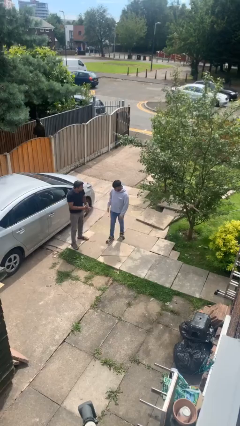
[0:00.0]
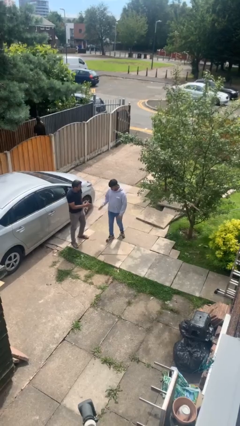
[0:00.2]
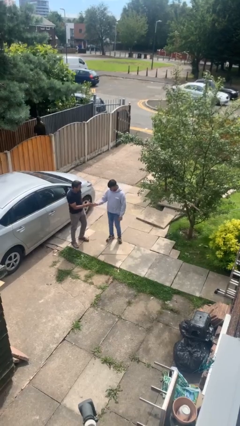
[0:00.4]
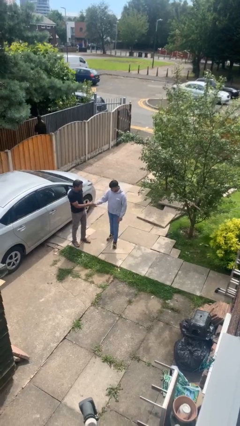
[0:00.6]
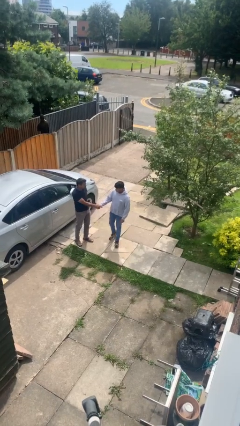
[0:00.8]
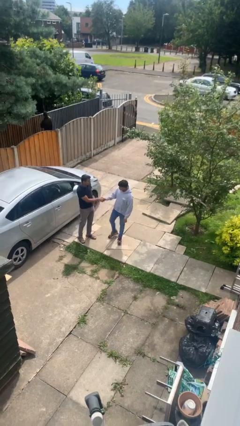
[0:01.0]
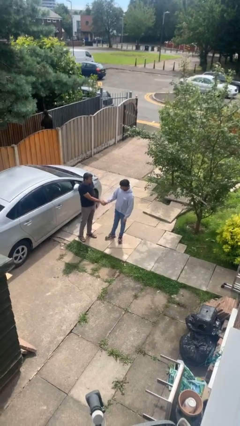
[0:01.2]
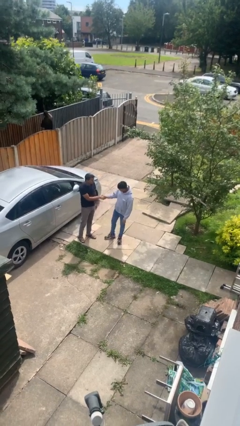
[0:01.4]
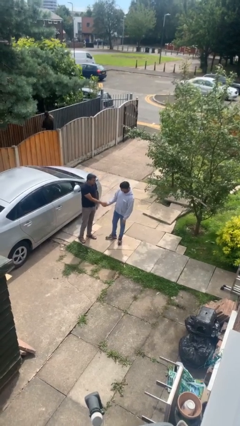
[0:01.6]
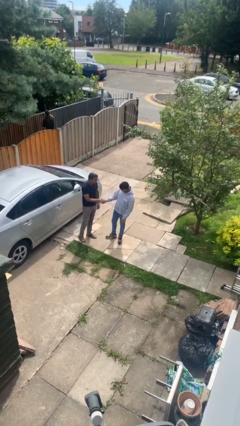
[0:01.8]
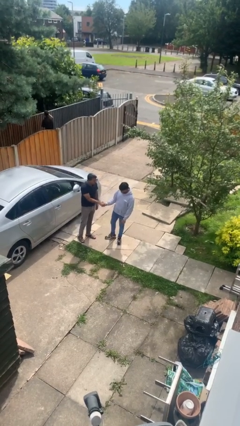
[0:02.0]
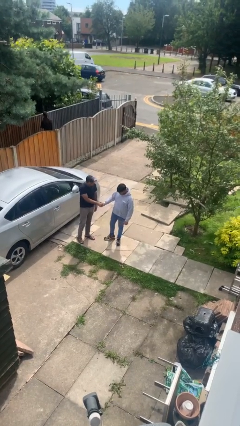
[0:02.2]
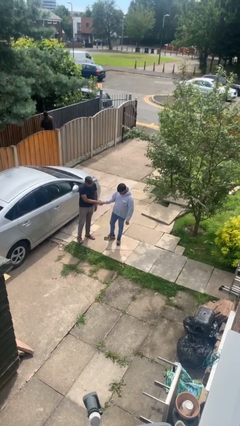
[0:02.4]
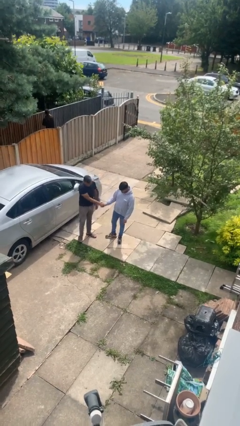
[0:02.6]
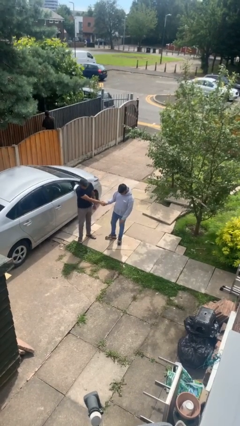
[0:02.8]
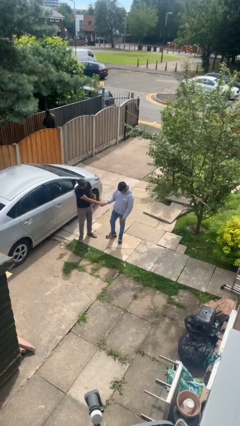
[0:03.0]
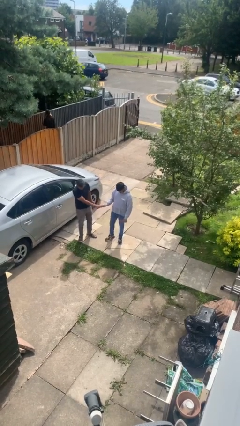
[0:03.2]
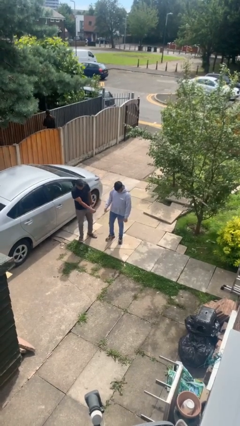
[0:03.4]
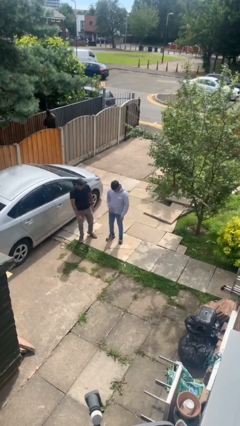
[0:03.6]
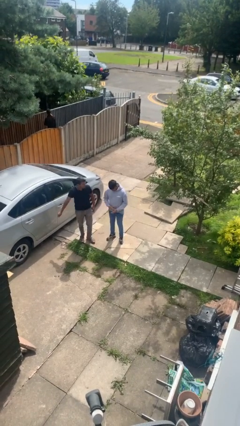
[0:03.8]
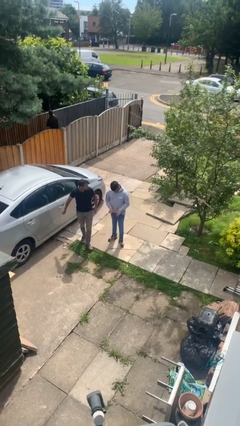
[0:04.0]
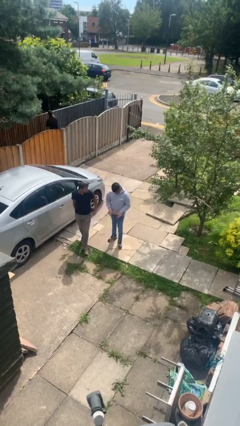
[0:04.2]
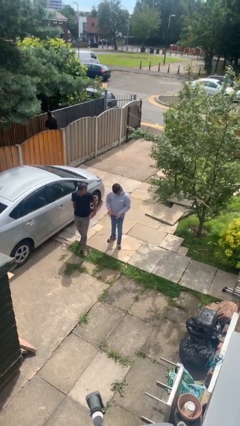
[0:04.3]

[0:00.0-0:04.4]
person shakes hand

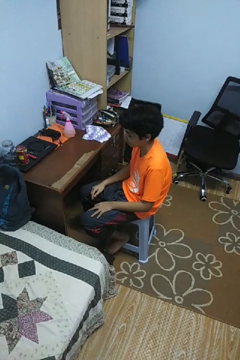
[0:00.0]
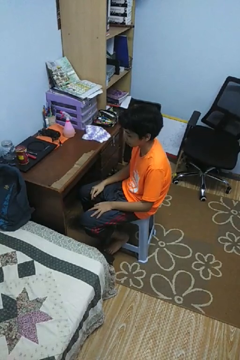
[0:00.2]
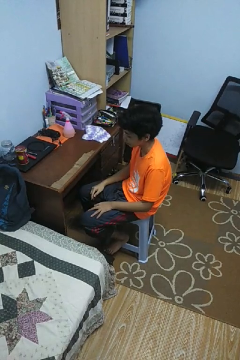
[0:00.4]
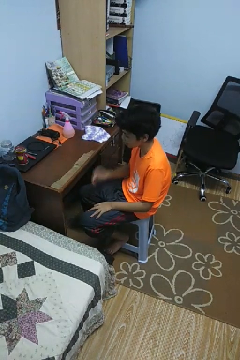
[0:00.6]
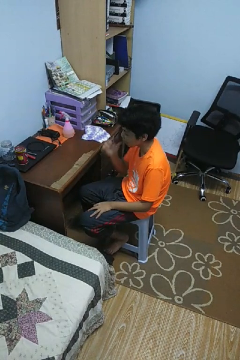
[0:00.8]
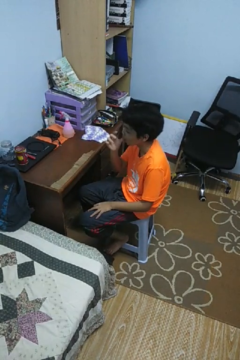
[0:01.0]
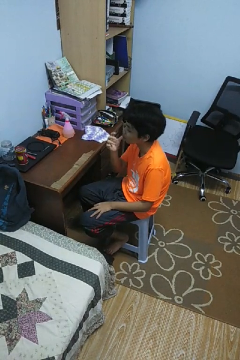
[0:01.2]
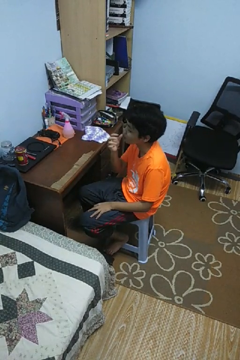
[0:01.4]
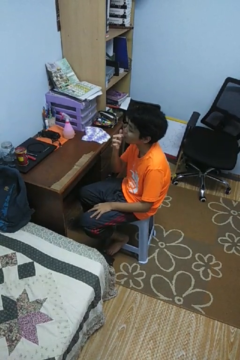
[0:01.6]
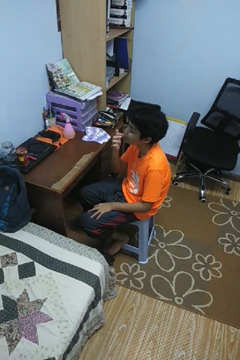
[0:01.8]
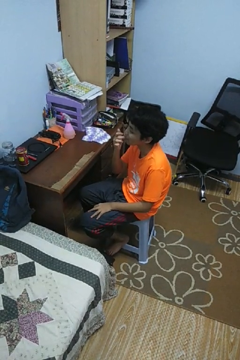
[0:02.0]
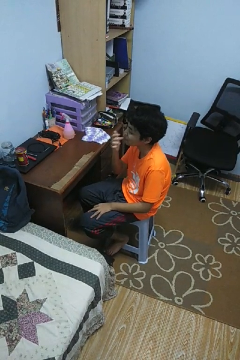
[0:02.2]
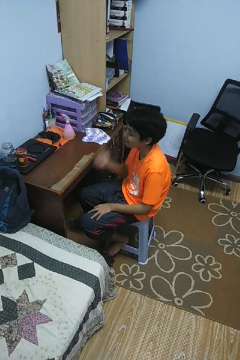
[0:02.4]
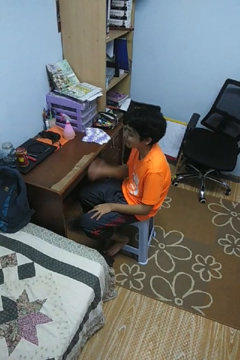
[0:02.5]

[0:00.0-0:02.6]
person licks fingers

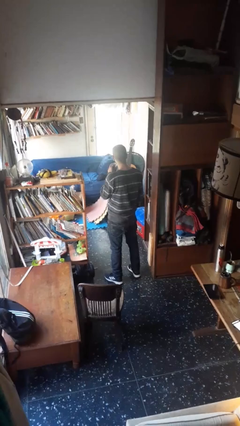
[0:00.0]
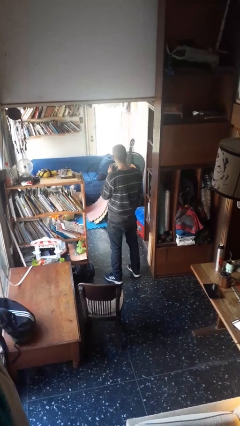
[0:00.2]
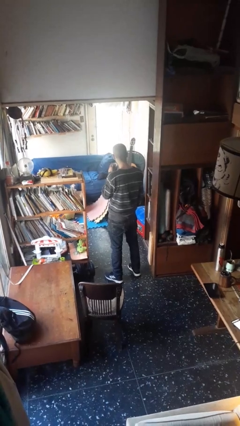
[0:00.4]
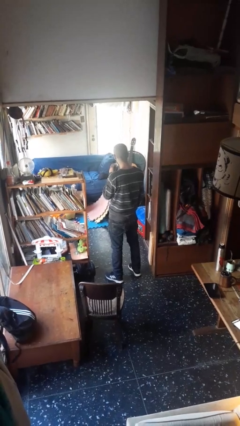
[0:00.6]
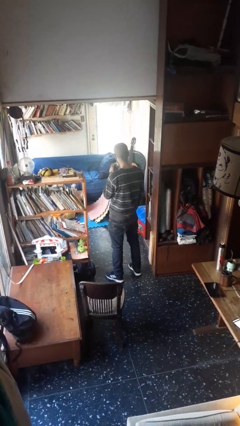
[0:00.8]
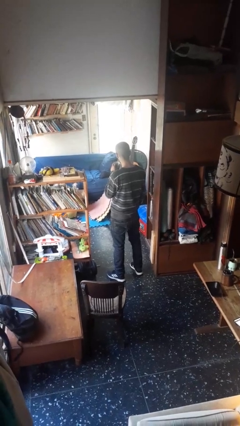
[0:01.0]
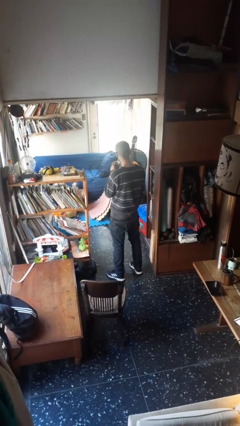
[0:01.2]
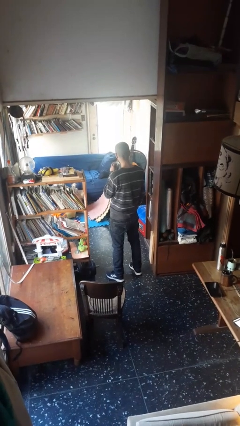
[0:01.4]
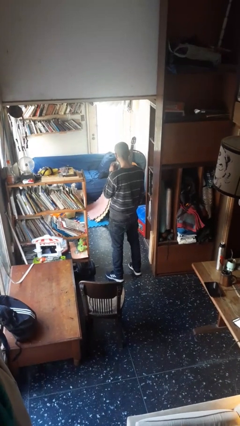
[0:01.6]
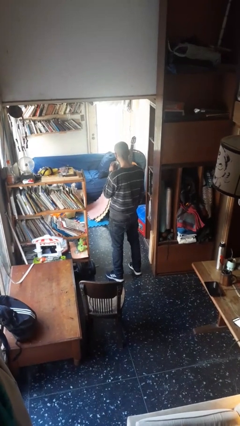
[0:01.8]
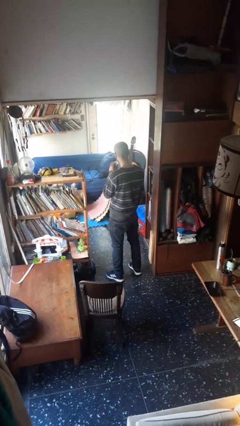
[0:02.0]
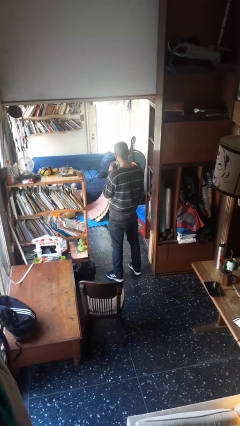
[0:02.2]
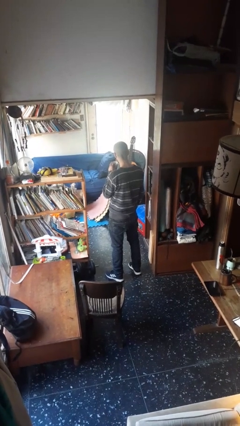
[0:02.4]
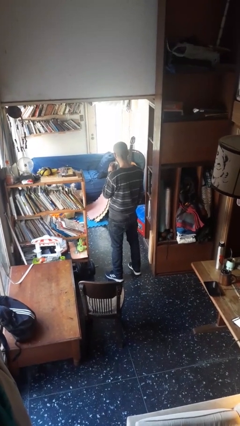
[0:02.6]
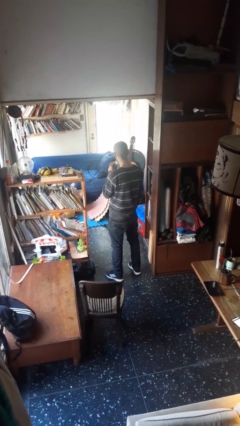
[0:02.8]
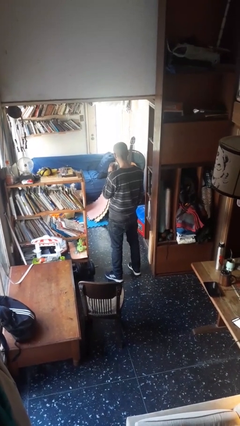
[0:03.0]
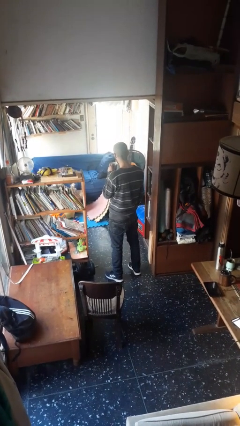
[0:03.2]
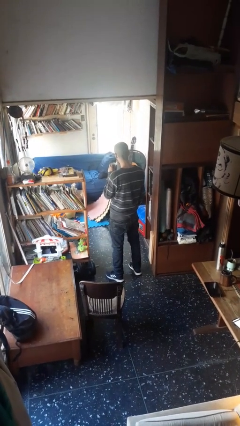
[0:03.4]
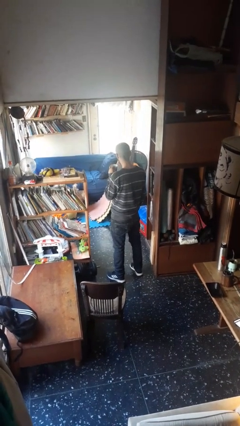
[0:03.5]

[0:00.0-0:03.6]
person drinks from straw

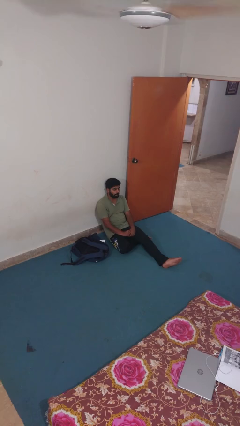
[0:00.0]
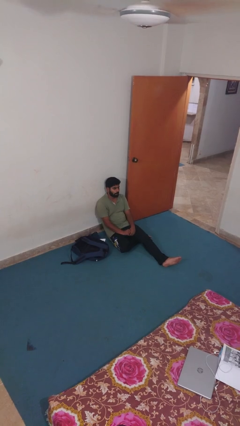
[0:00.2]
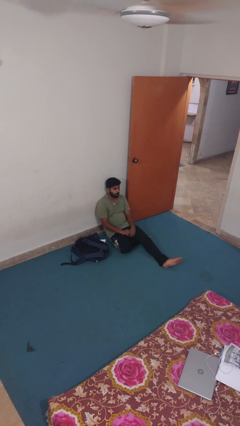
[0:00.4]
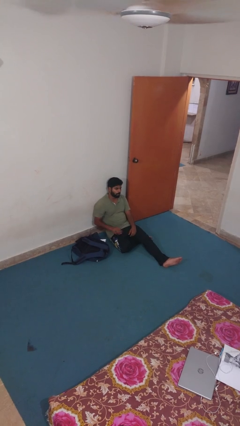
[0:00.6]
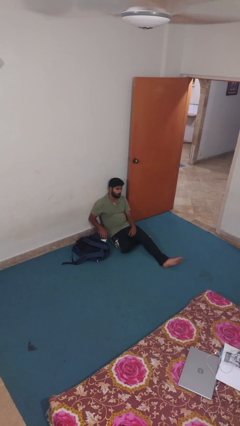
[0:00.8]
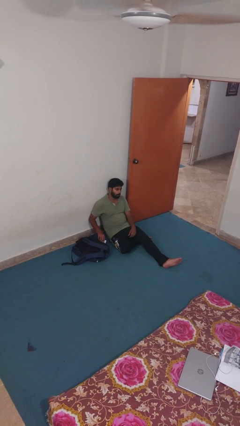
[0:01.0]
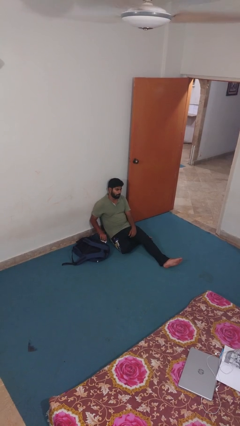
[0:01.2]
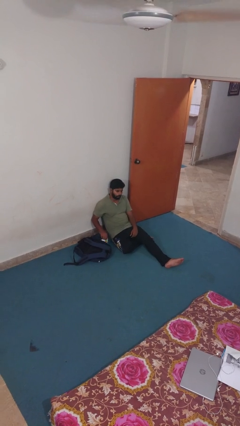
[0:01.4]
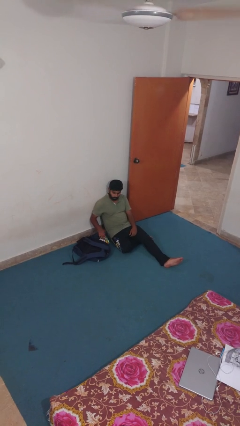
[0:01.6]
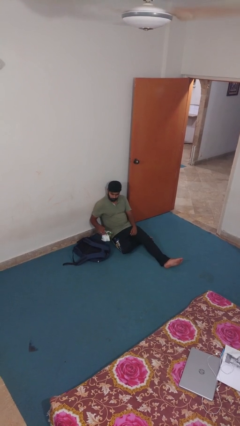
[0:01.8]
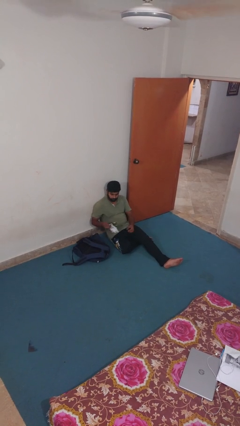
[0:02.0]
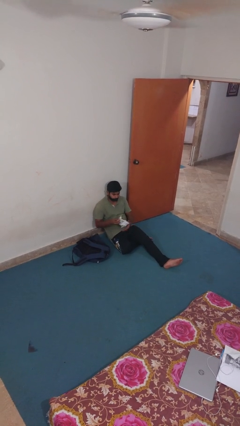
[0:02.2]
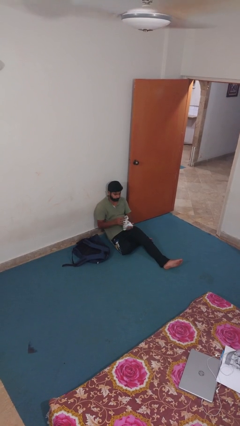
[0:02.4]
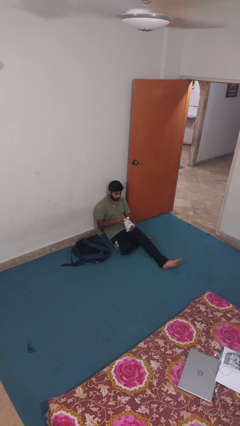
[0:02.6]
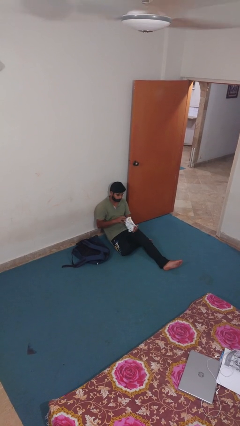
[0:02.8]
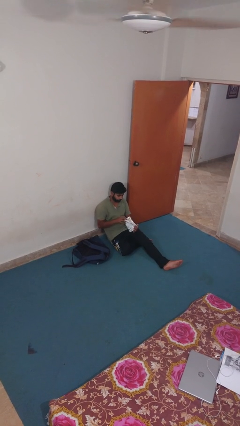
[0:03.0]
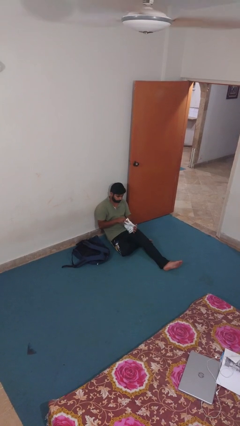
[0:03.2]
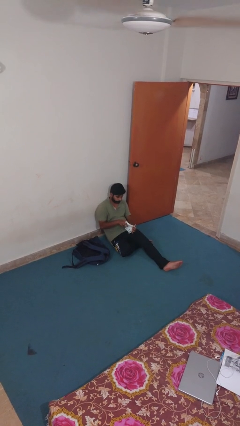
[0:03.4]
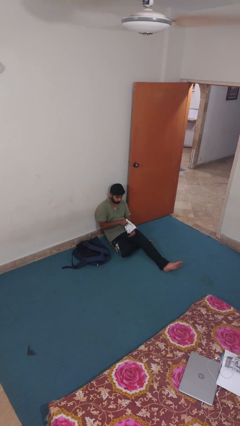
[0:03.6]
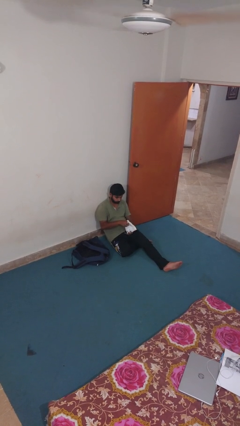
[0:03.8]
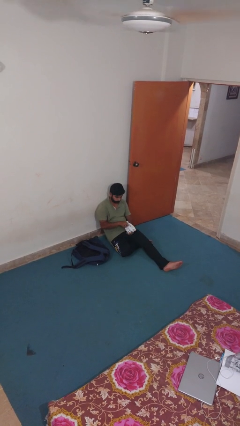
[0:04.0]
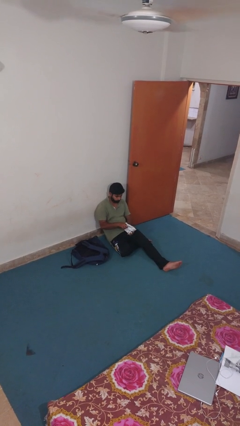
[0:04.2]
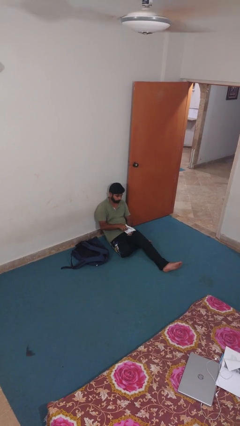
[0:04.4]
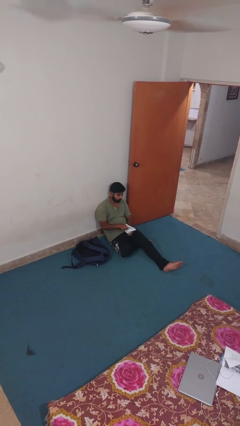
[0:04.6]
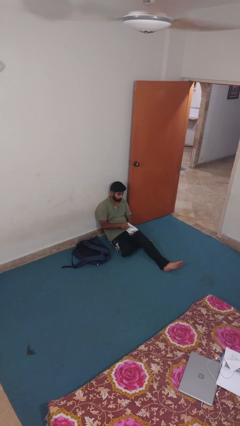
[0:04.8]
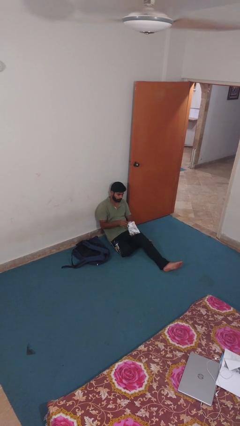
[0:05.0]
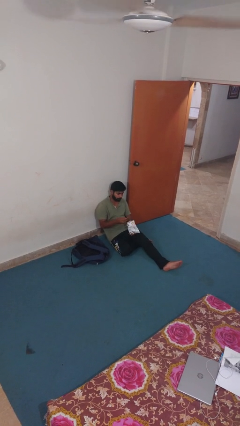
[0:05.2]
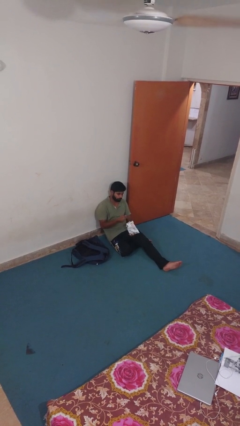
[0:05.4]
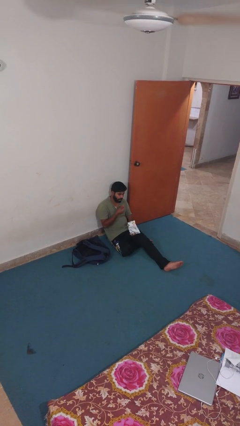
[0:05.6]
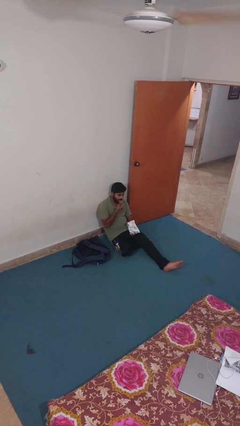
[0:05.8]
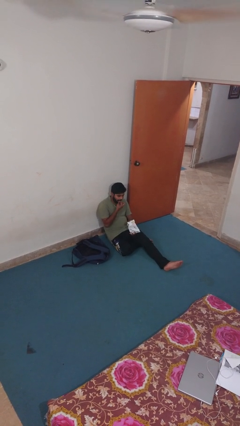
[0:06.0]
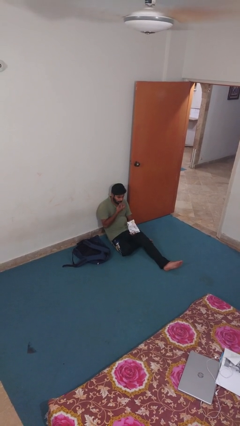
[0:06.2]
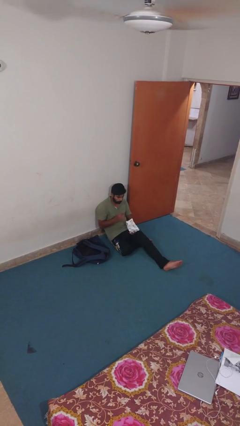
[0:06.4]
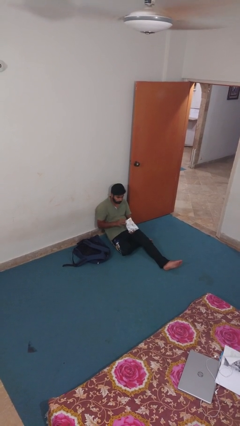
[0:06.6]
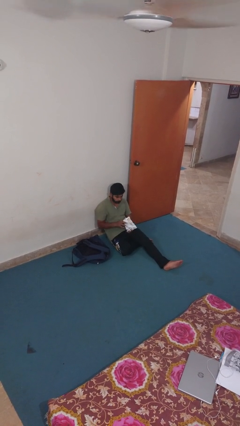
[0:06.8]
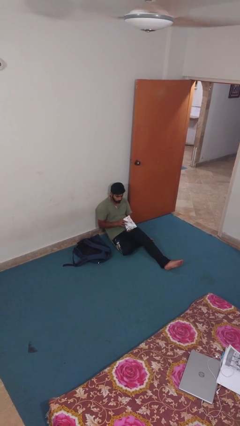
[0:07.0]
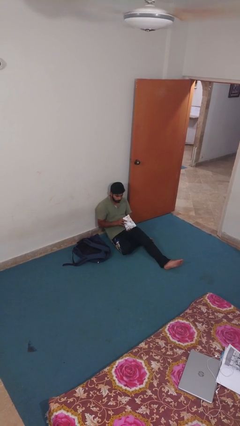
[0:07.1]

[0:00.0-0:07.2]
person eats snack from bag

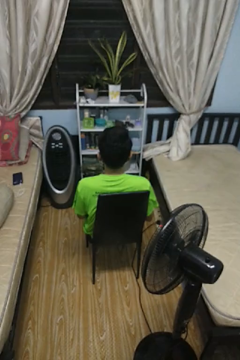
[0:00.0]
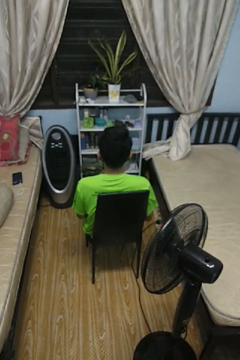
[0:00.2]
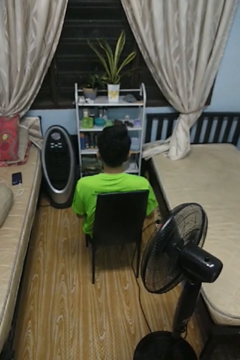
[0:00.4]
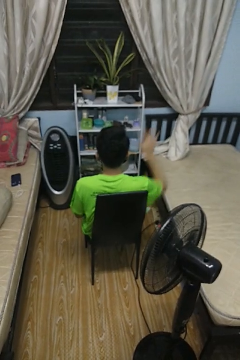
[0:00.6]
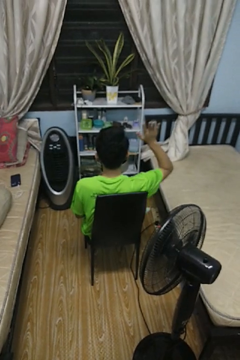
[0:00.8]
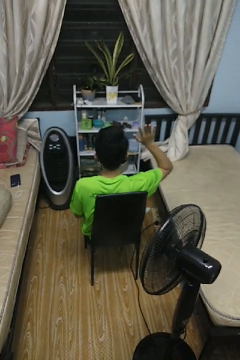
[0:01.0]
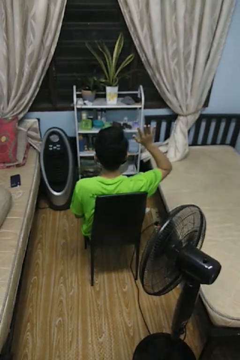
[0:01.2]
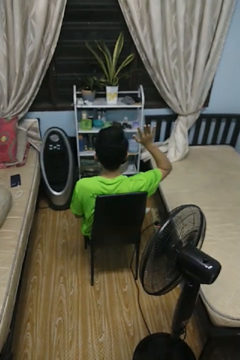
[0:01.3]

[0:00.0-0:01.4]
person gestures number five
